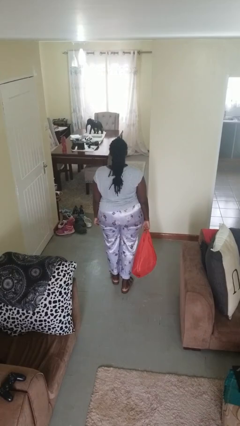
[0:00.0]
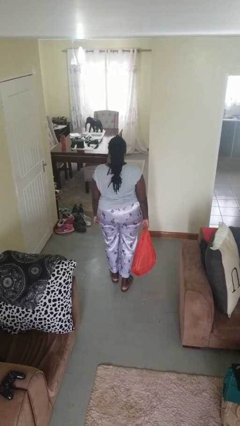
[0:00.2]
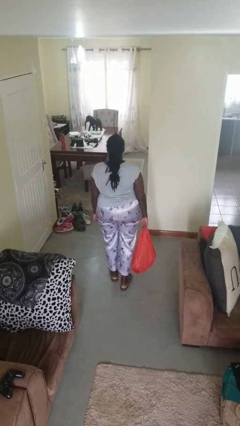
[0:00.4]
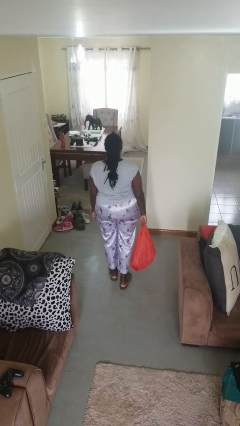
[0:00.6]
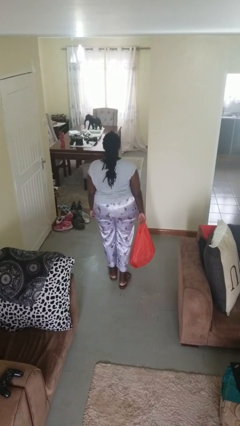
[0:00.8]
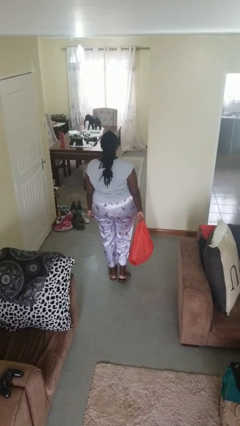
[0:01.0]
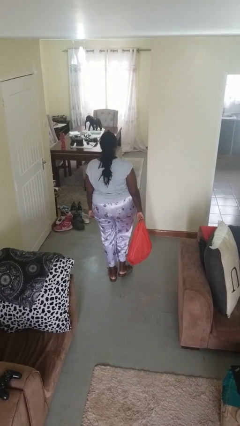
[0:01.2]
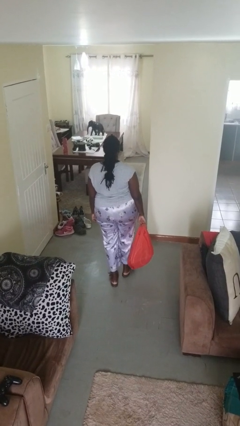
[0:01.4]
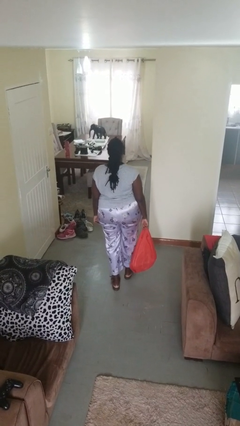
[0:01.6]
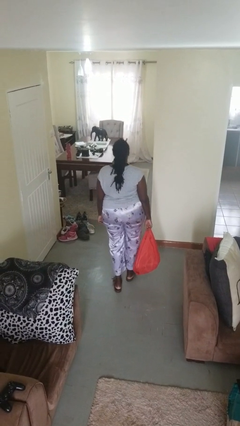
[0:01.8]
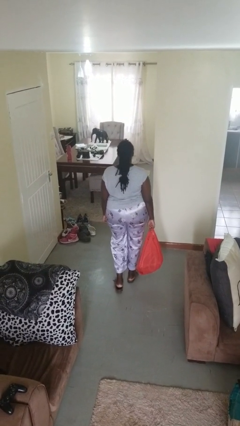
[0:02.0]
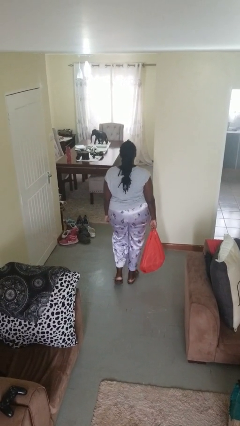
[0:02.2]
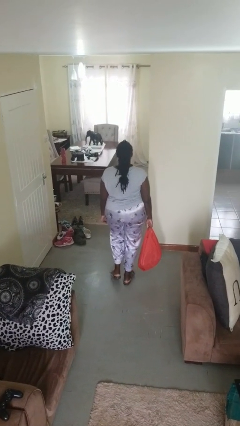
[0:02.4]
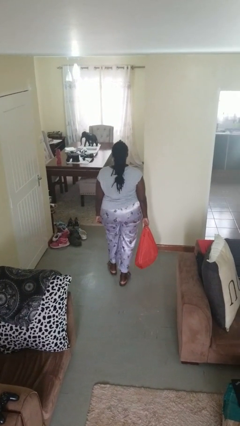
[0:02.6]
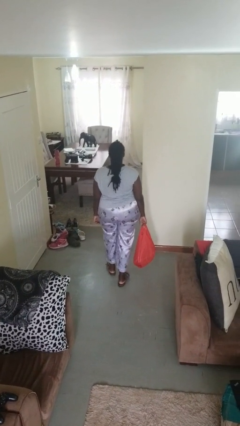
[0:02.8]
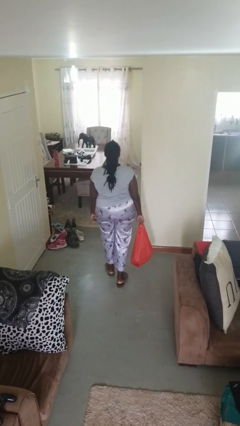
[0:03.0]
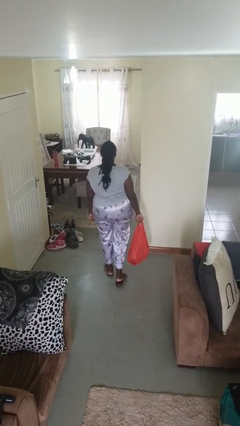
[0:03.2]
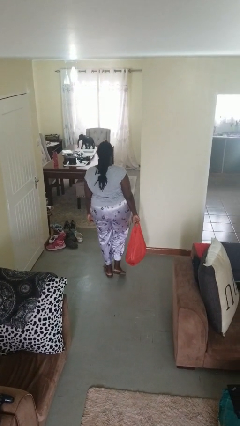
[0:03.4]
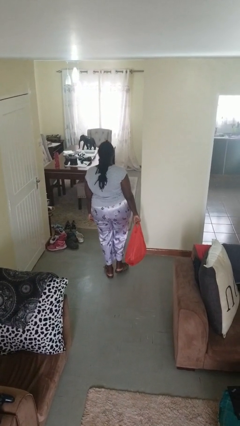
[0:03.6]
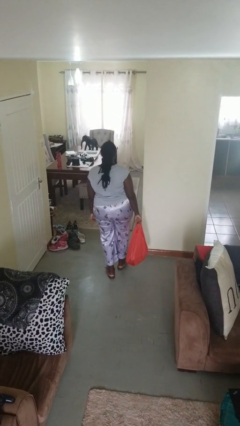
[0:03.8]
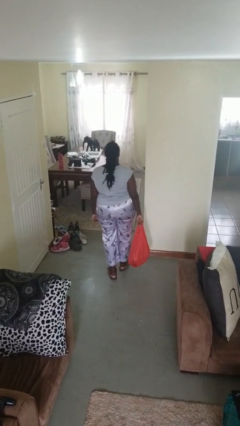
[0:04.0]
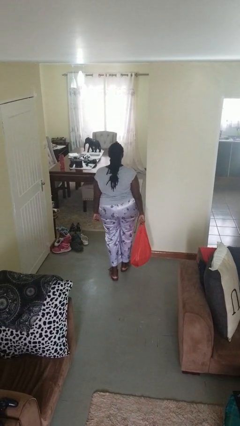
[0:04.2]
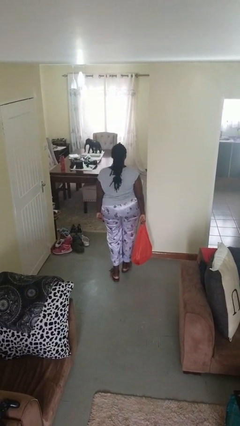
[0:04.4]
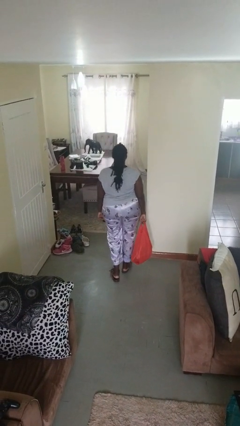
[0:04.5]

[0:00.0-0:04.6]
person carries groceries

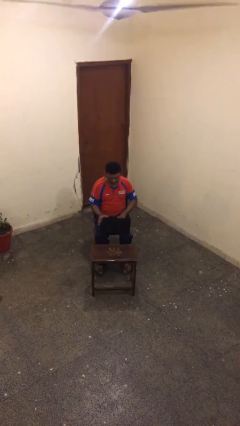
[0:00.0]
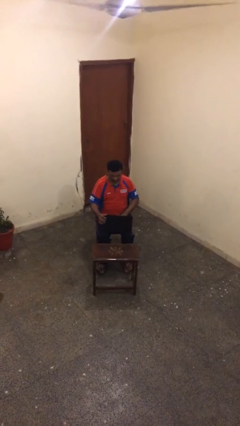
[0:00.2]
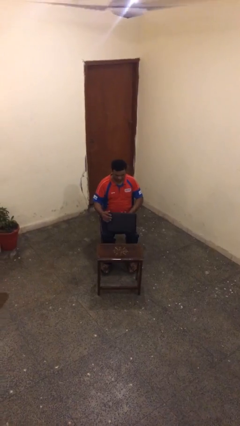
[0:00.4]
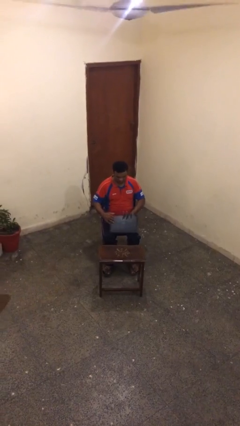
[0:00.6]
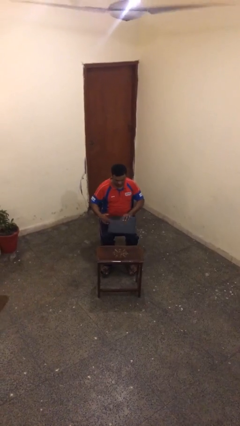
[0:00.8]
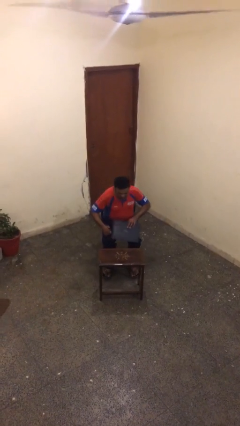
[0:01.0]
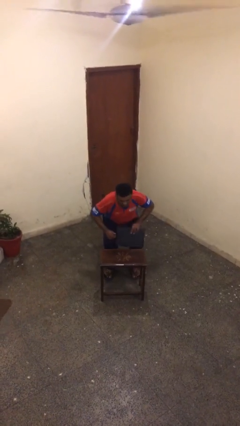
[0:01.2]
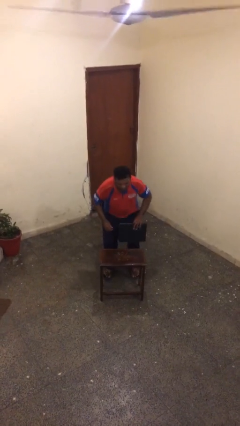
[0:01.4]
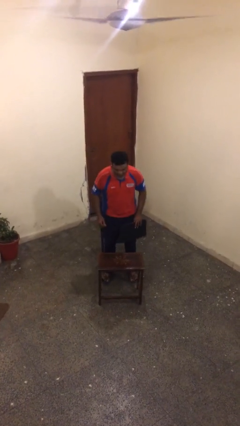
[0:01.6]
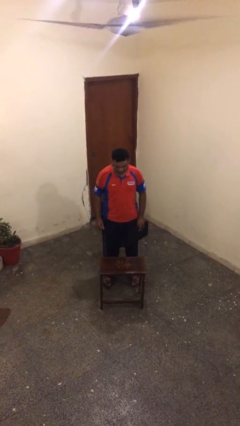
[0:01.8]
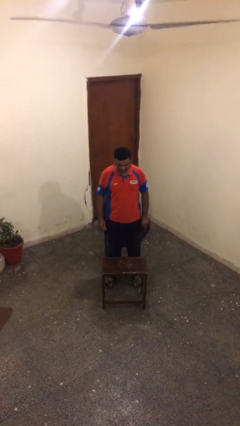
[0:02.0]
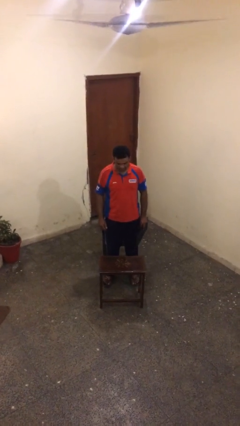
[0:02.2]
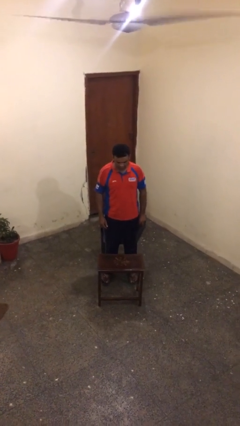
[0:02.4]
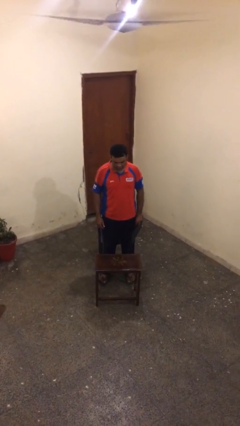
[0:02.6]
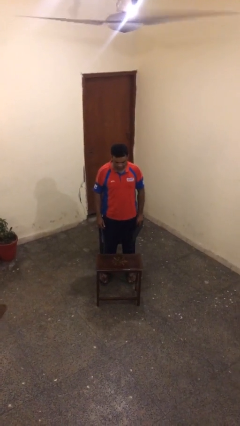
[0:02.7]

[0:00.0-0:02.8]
person stands up

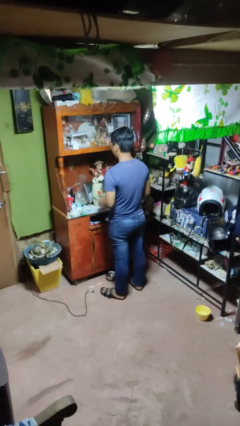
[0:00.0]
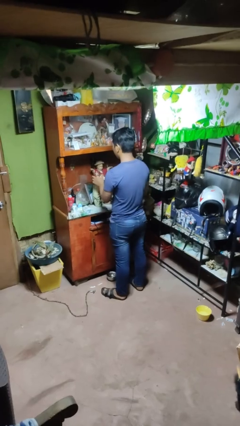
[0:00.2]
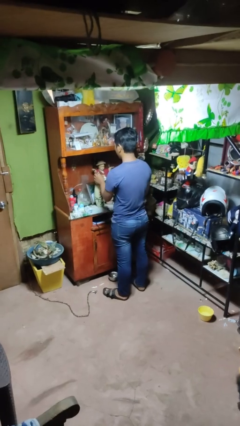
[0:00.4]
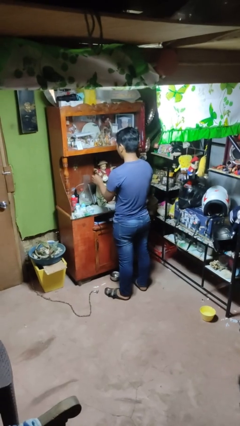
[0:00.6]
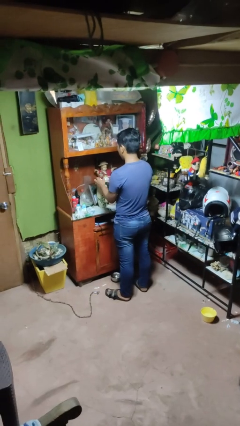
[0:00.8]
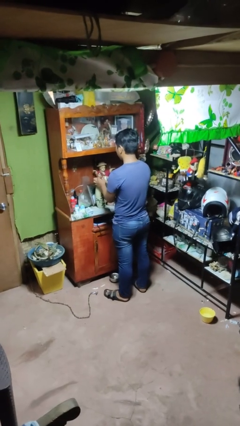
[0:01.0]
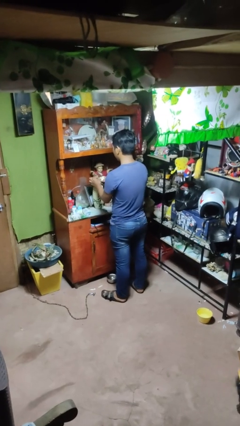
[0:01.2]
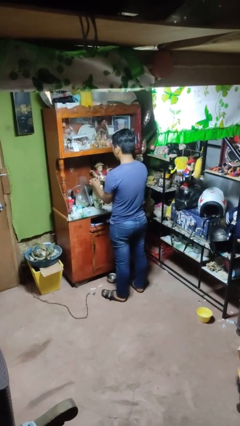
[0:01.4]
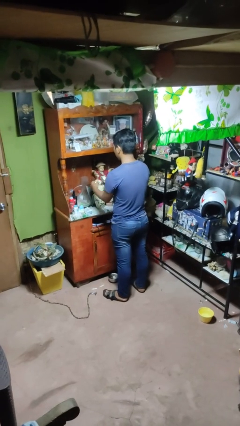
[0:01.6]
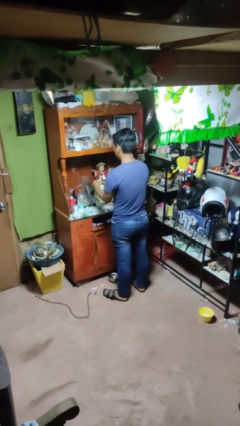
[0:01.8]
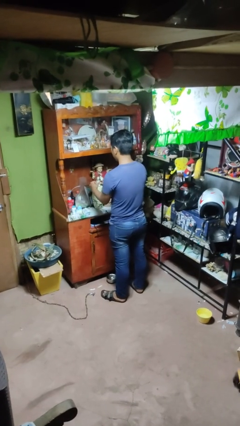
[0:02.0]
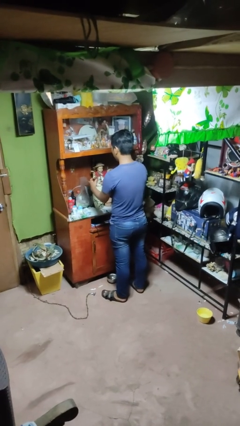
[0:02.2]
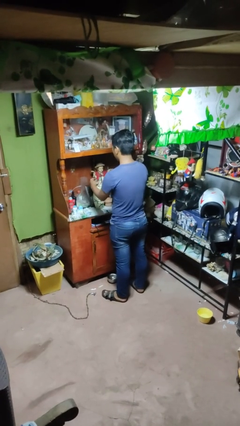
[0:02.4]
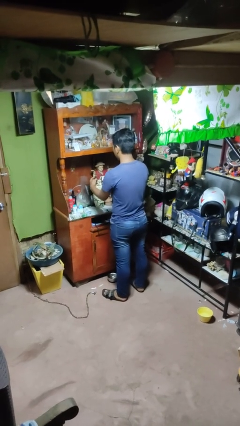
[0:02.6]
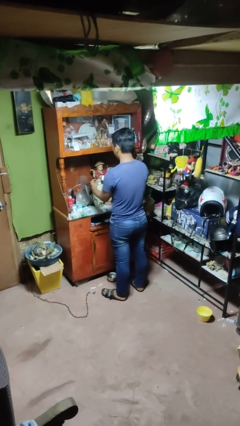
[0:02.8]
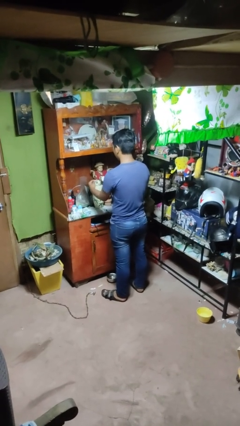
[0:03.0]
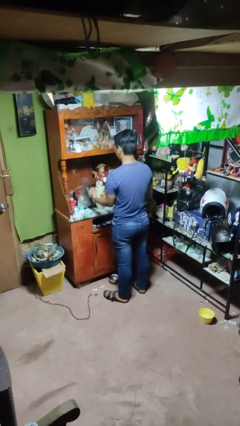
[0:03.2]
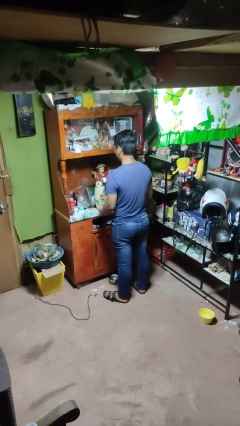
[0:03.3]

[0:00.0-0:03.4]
person arranges flowers in vase

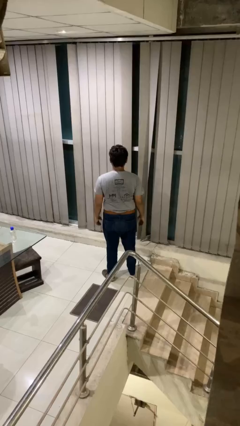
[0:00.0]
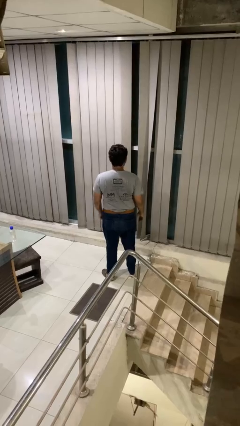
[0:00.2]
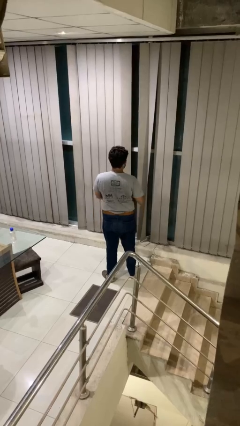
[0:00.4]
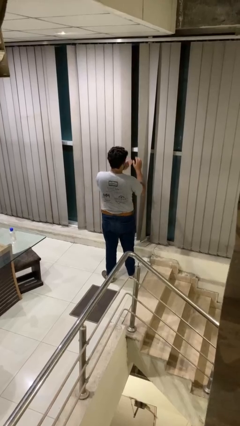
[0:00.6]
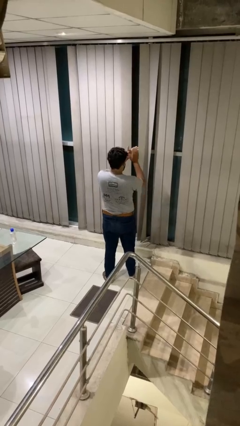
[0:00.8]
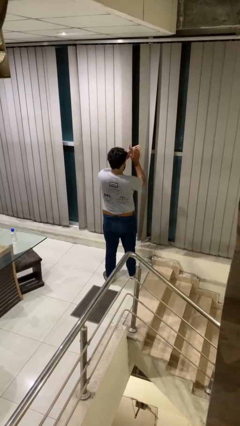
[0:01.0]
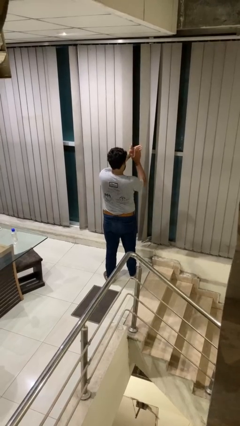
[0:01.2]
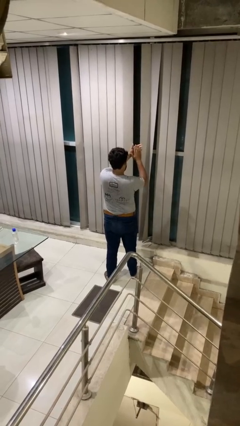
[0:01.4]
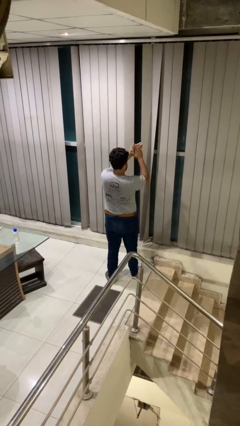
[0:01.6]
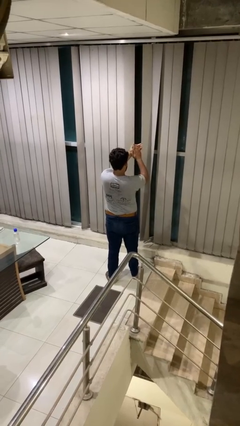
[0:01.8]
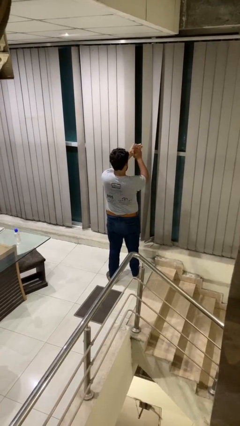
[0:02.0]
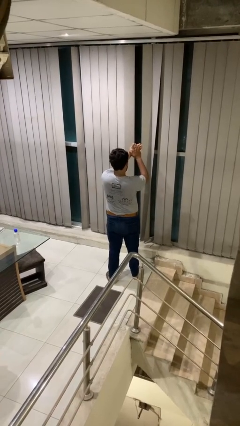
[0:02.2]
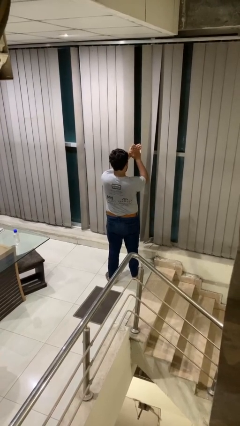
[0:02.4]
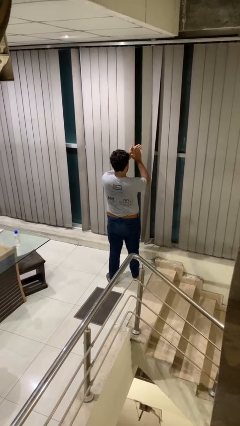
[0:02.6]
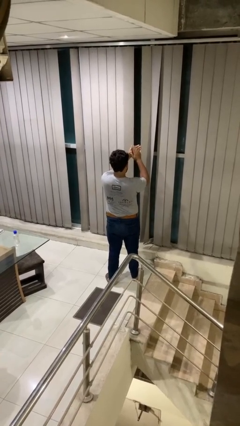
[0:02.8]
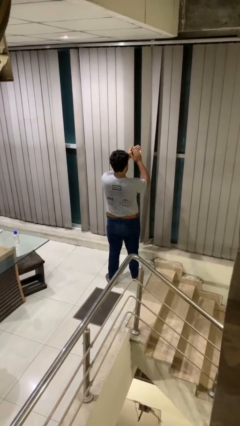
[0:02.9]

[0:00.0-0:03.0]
person claps hands

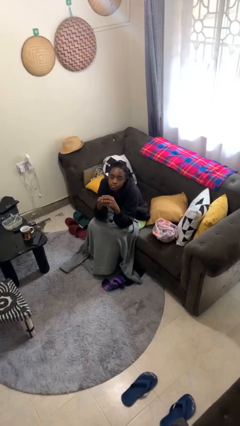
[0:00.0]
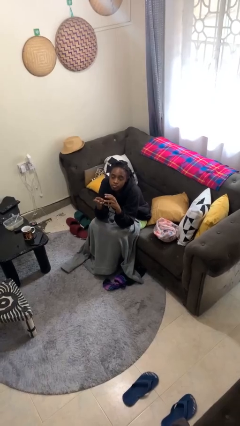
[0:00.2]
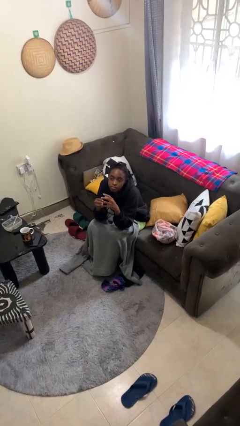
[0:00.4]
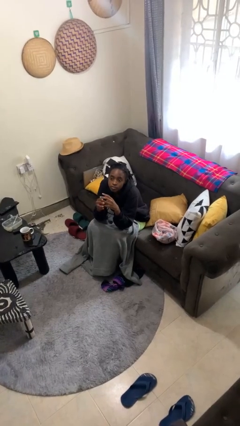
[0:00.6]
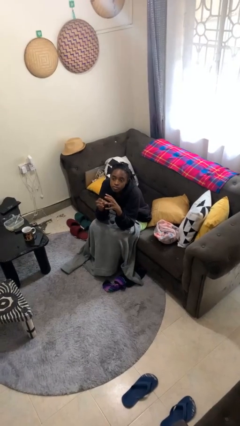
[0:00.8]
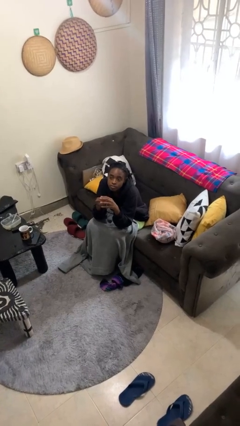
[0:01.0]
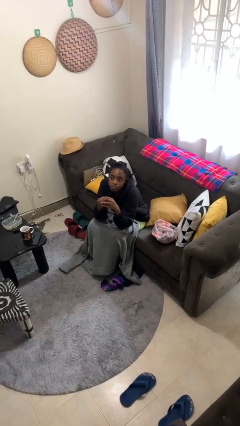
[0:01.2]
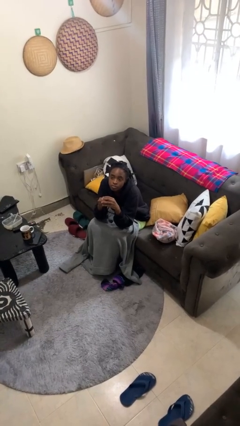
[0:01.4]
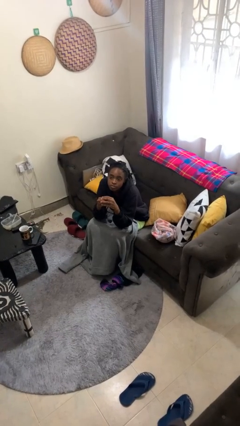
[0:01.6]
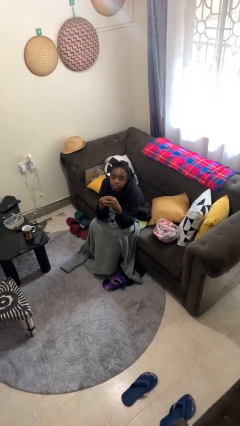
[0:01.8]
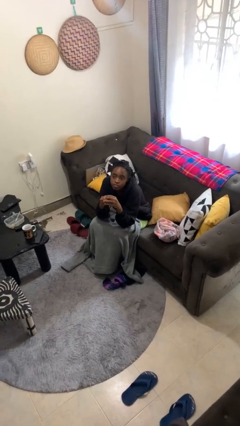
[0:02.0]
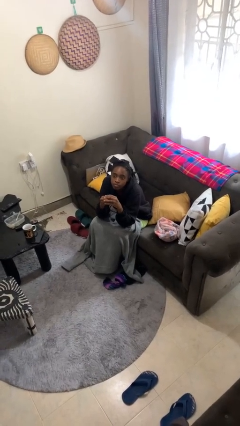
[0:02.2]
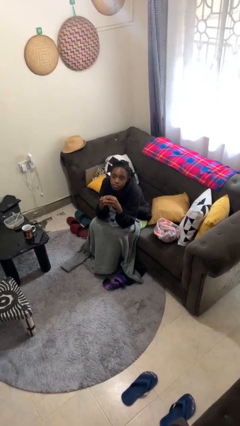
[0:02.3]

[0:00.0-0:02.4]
person puts on ring

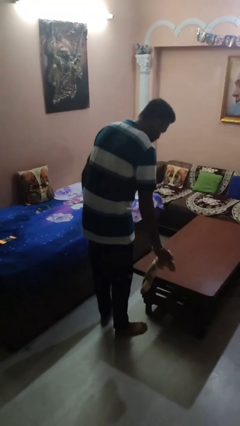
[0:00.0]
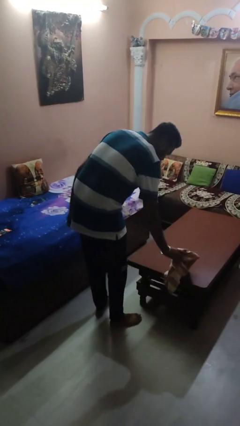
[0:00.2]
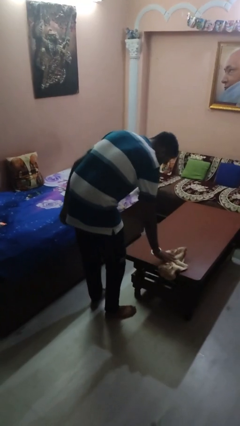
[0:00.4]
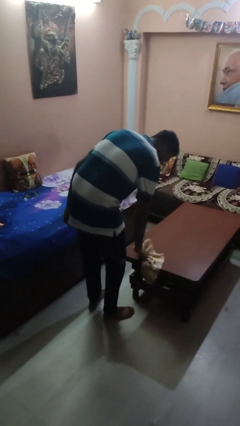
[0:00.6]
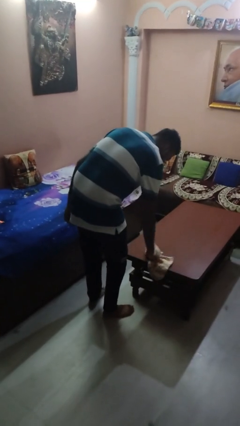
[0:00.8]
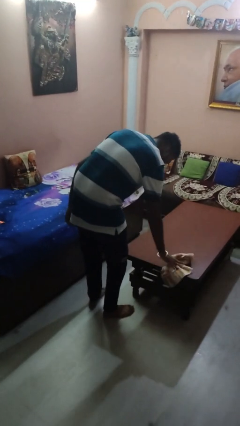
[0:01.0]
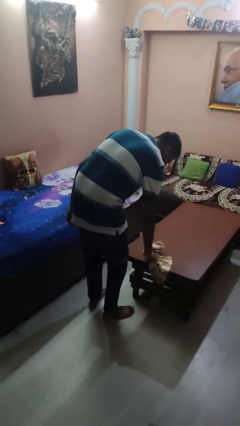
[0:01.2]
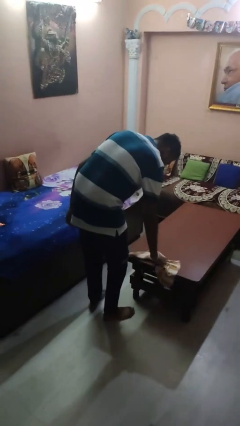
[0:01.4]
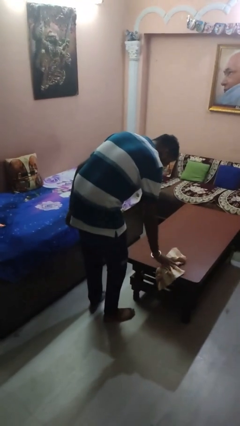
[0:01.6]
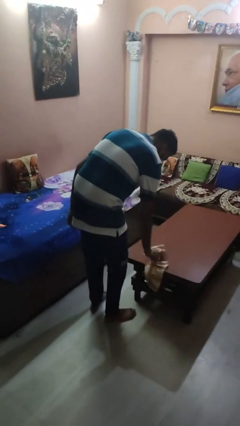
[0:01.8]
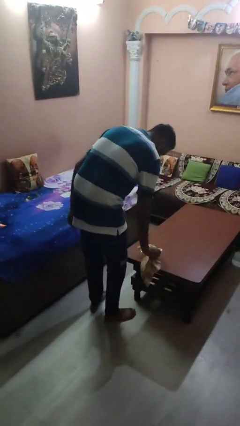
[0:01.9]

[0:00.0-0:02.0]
person cleans table with rag
